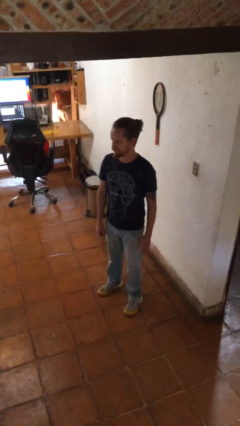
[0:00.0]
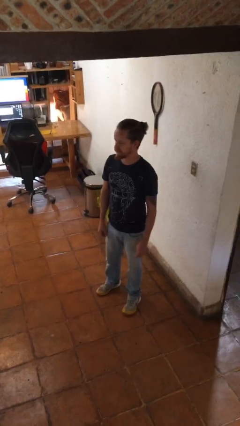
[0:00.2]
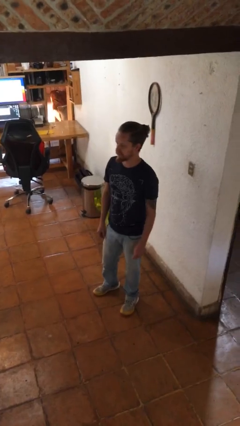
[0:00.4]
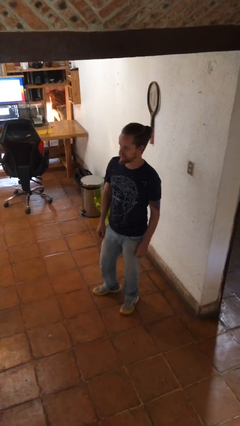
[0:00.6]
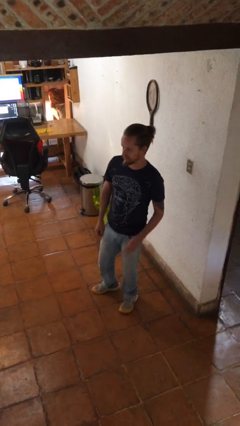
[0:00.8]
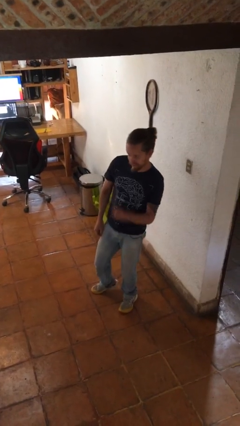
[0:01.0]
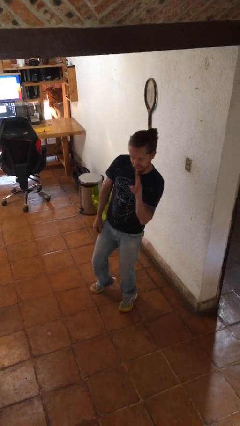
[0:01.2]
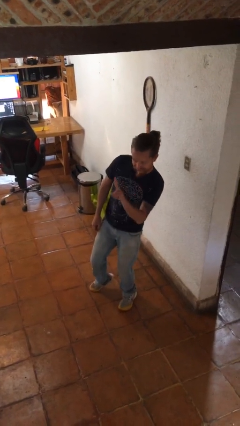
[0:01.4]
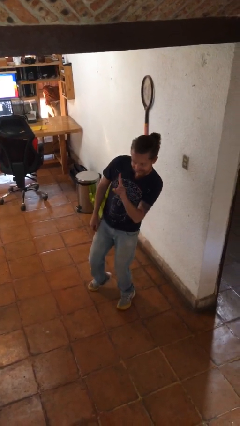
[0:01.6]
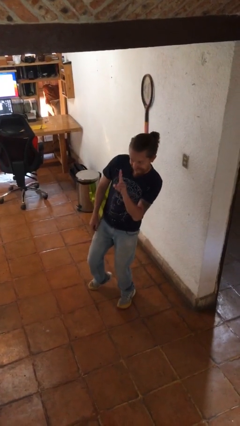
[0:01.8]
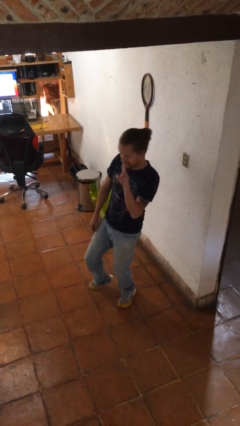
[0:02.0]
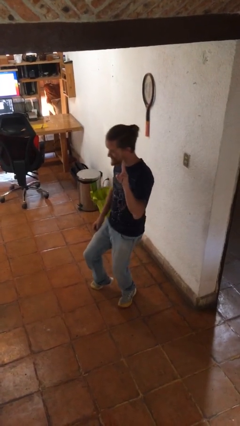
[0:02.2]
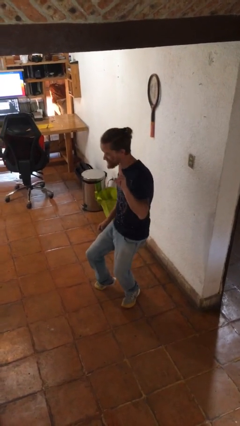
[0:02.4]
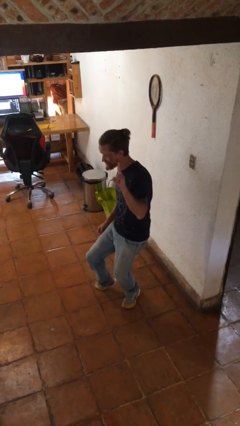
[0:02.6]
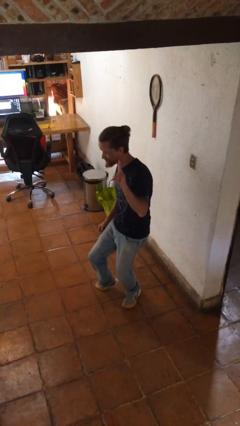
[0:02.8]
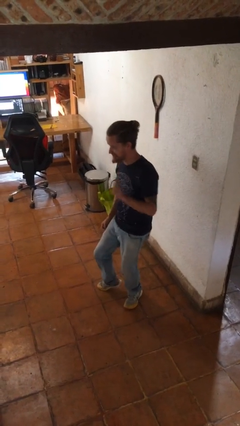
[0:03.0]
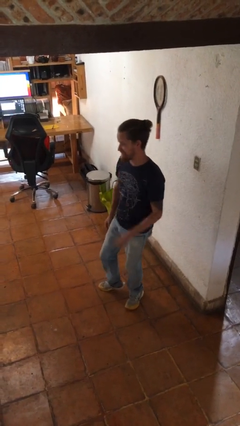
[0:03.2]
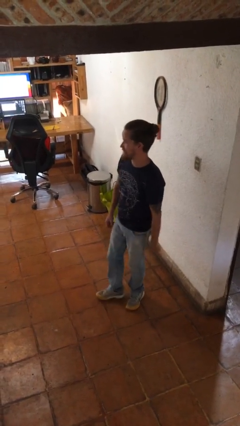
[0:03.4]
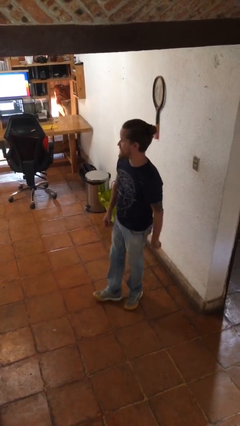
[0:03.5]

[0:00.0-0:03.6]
person gestures peace

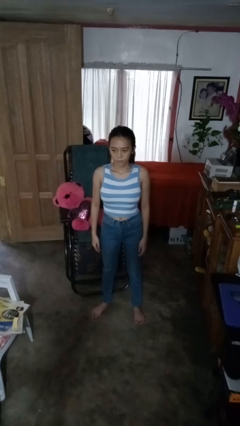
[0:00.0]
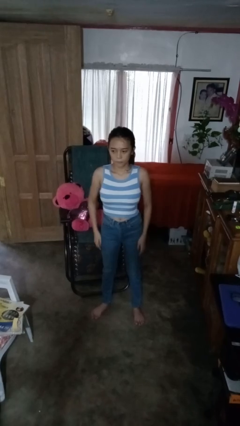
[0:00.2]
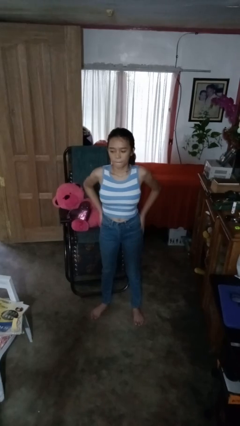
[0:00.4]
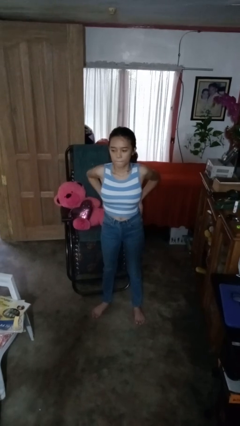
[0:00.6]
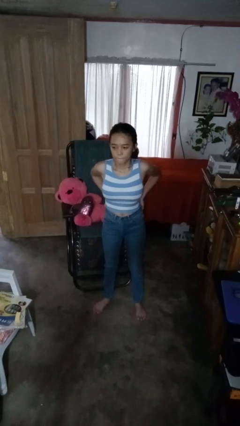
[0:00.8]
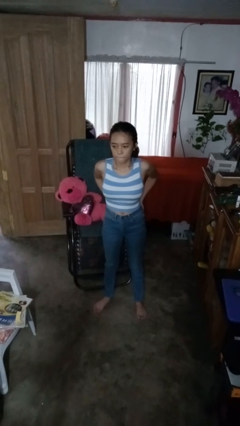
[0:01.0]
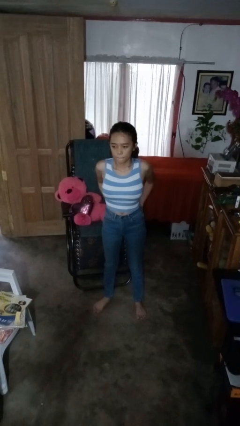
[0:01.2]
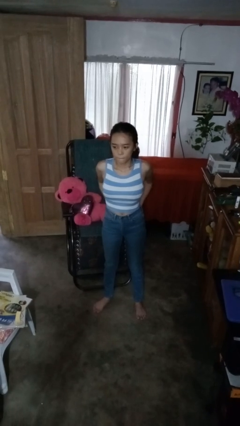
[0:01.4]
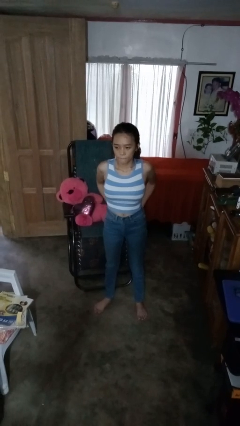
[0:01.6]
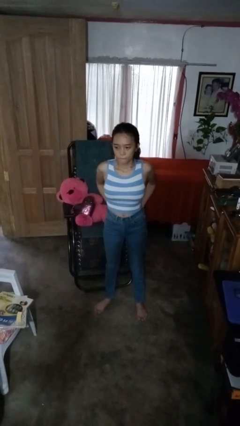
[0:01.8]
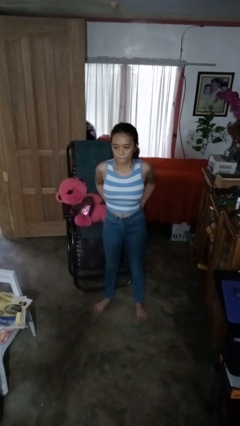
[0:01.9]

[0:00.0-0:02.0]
person puts hands in back pockets

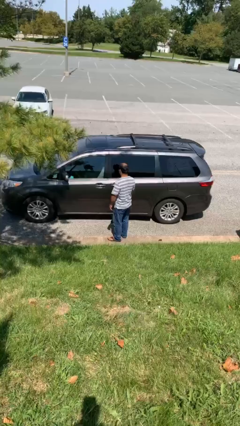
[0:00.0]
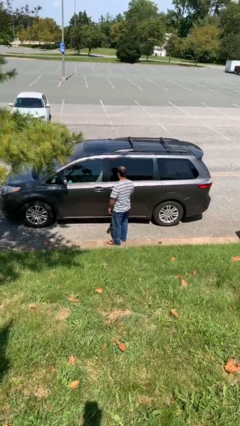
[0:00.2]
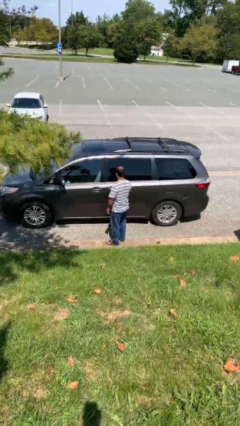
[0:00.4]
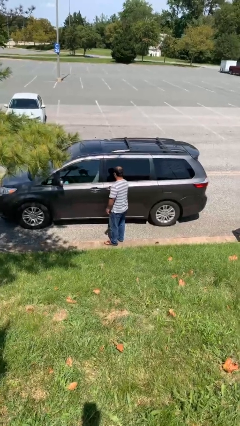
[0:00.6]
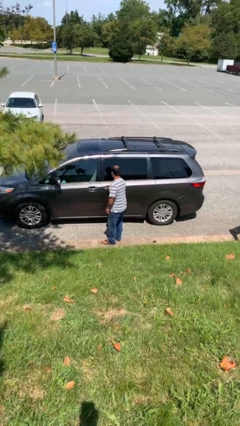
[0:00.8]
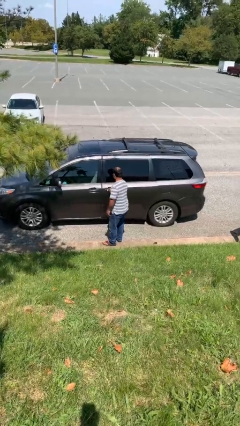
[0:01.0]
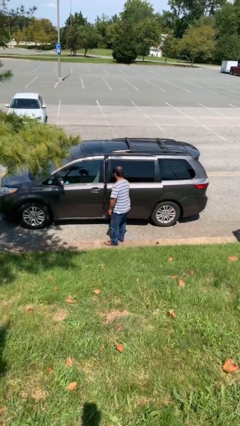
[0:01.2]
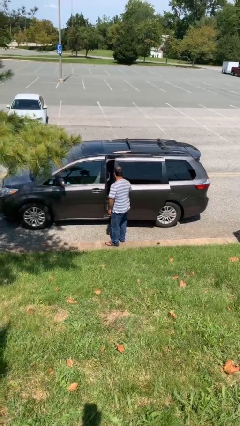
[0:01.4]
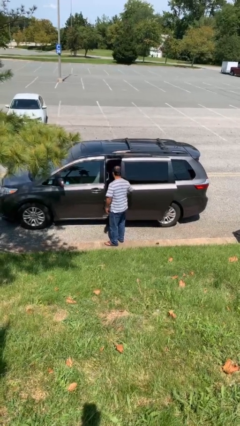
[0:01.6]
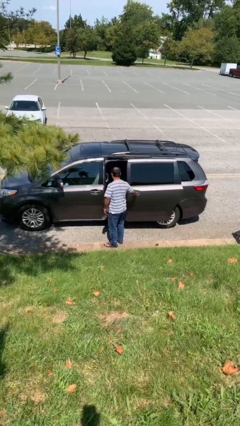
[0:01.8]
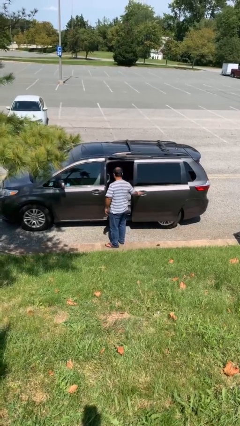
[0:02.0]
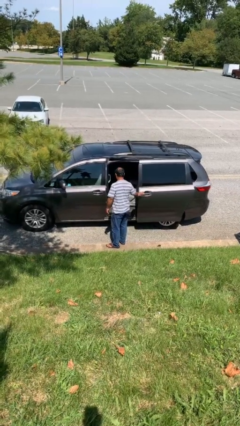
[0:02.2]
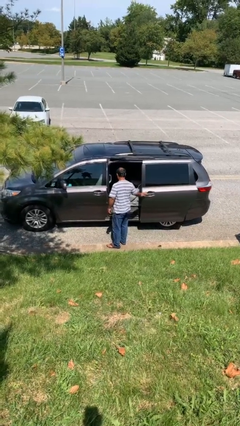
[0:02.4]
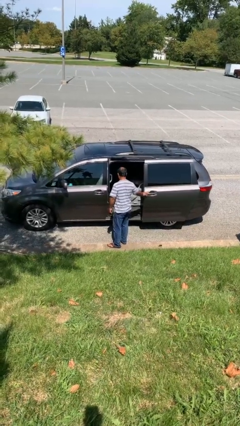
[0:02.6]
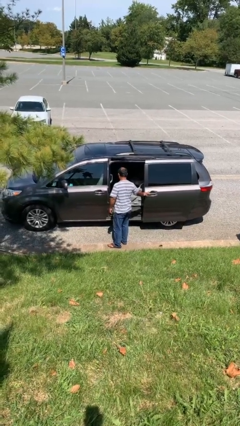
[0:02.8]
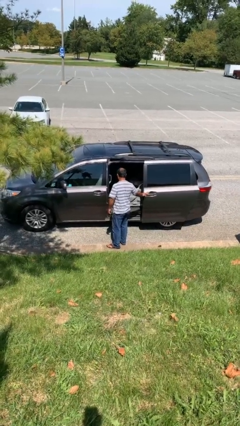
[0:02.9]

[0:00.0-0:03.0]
person opens car door

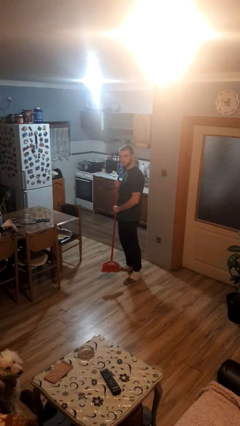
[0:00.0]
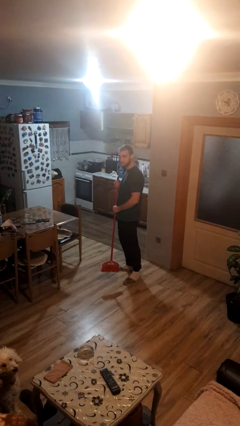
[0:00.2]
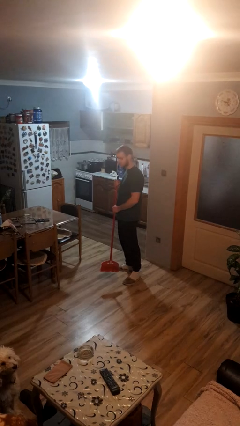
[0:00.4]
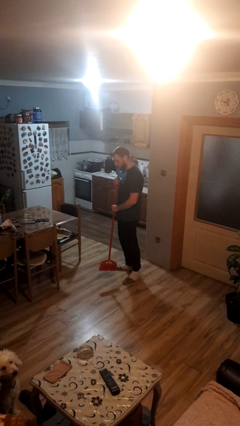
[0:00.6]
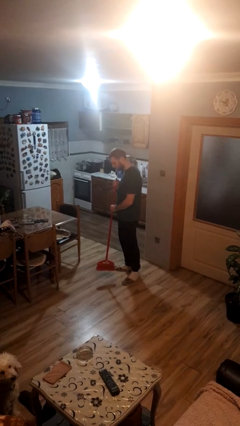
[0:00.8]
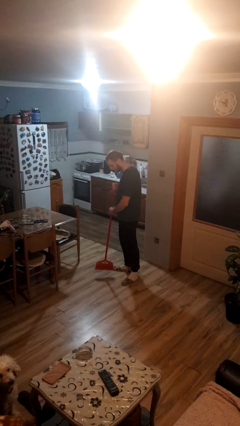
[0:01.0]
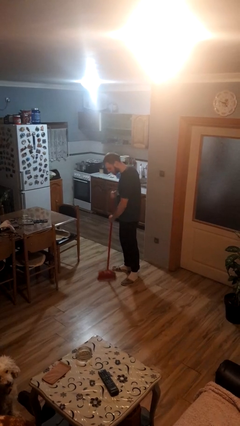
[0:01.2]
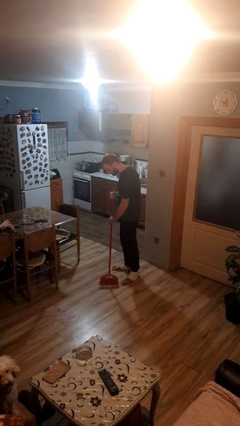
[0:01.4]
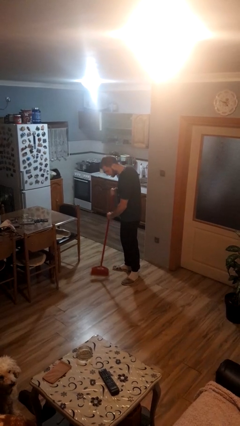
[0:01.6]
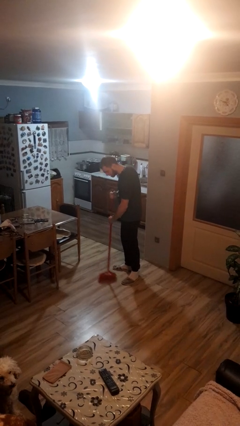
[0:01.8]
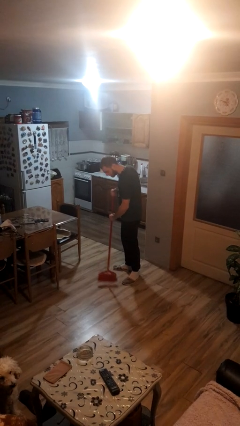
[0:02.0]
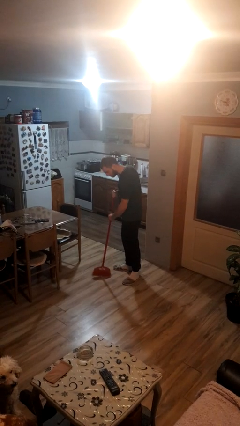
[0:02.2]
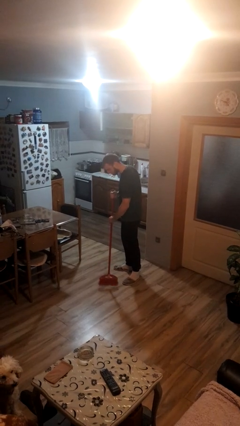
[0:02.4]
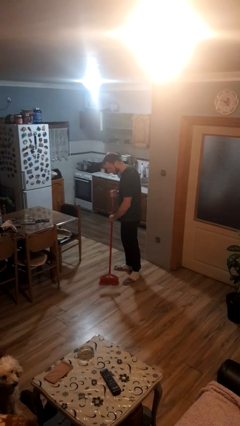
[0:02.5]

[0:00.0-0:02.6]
person sweeps floor

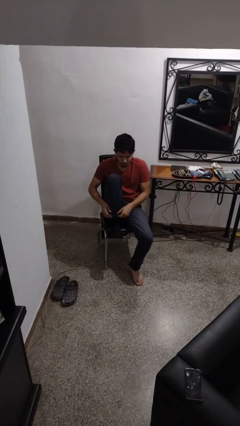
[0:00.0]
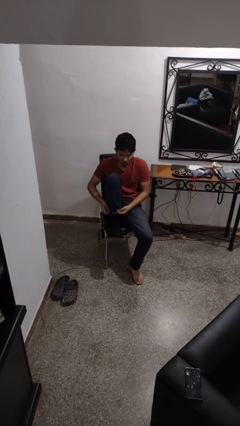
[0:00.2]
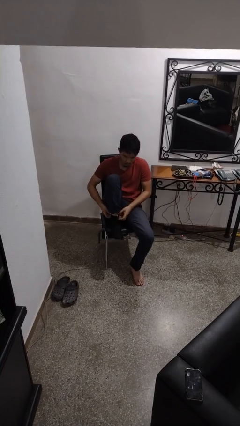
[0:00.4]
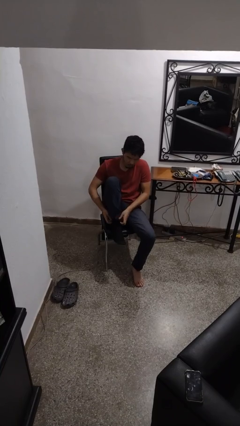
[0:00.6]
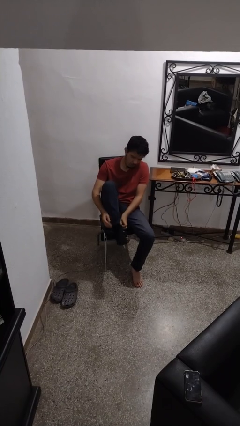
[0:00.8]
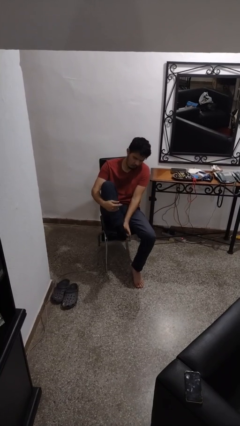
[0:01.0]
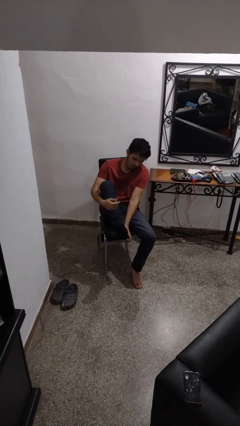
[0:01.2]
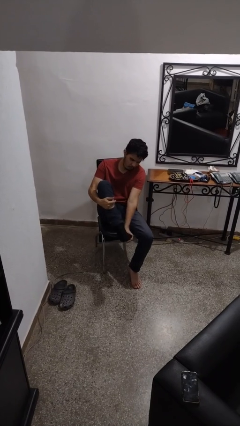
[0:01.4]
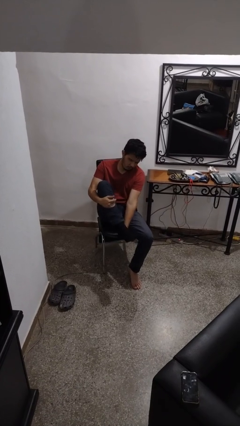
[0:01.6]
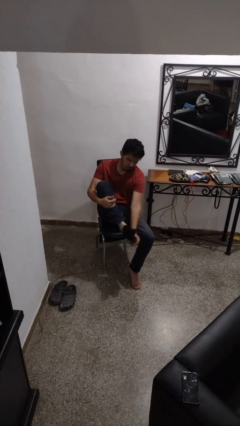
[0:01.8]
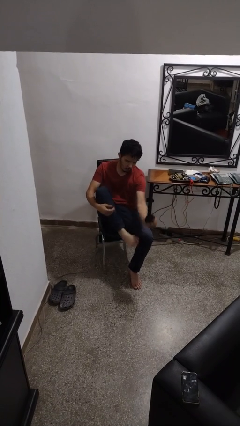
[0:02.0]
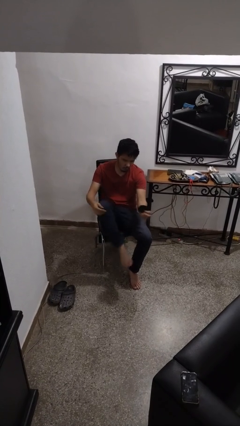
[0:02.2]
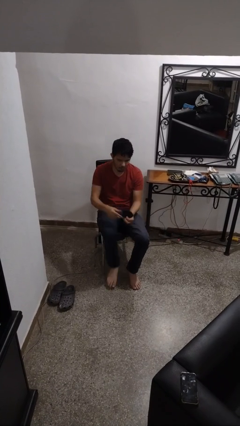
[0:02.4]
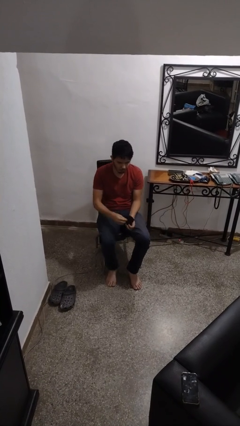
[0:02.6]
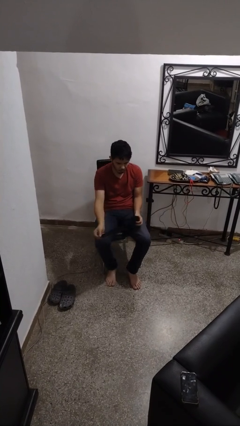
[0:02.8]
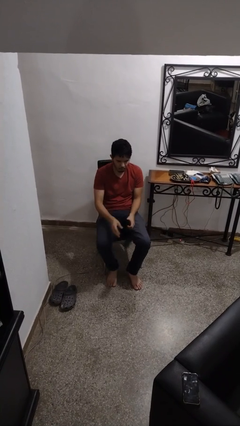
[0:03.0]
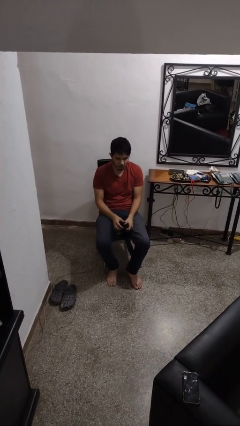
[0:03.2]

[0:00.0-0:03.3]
person takes off socks

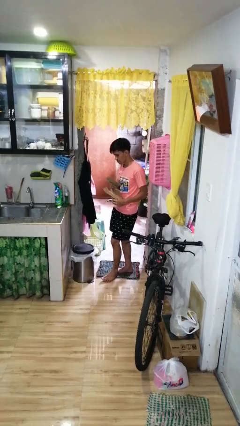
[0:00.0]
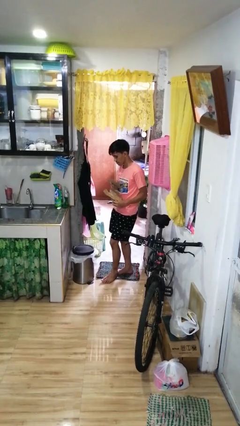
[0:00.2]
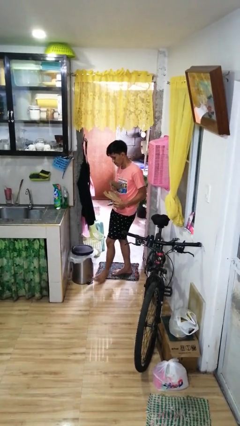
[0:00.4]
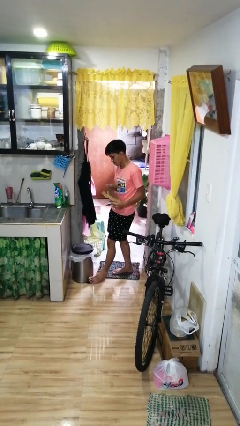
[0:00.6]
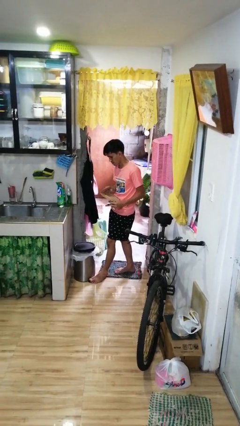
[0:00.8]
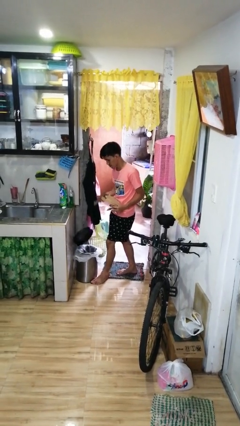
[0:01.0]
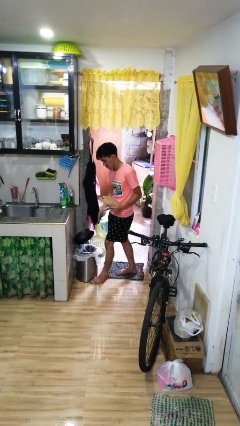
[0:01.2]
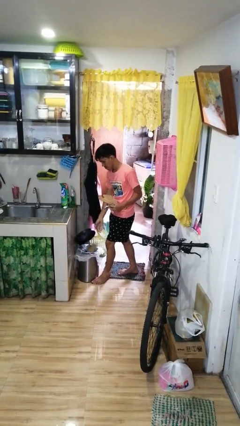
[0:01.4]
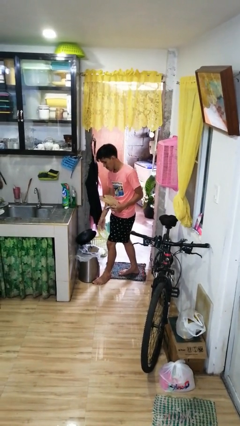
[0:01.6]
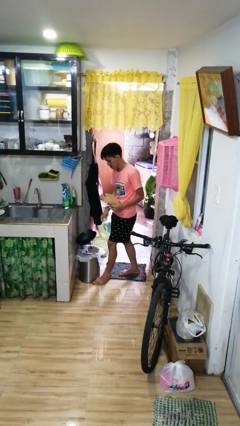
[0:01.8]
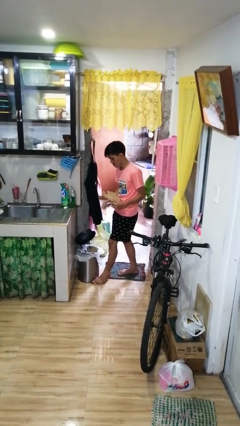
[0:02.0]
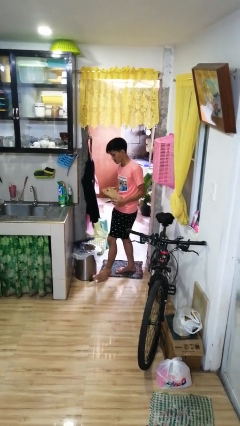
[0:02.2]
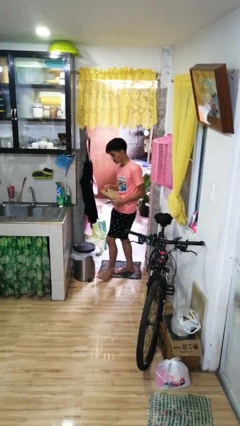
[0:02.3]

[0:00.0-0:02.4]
person discards trash

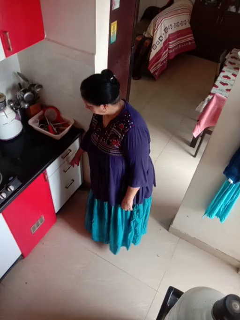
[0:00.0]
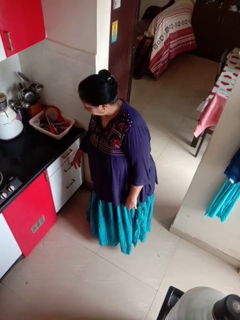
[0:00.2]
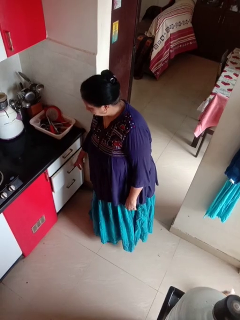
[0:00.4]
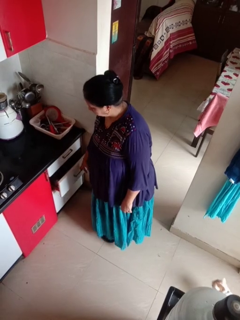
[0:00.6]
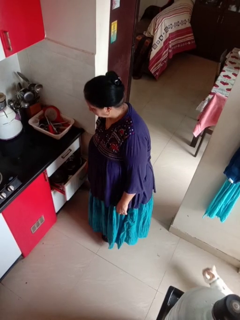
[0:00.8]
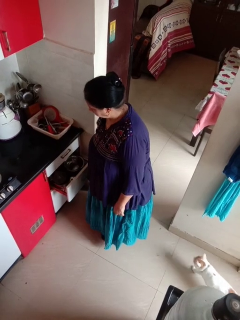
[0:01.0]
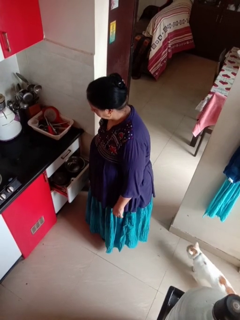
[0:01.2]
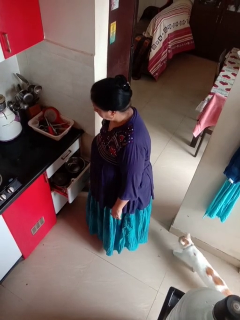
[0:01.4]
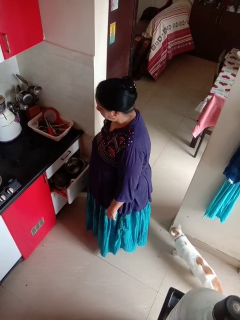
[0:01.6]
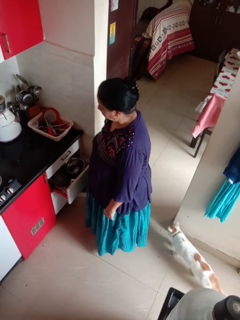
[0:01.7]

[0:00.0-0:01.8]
person opens kitchen drawer
